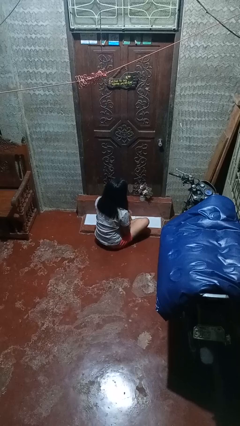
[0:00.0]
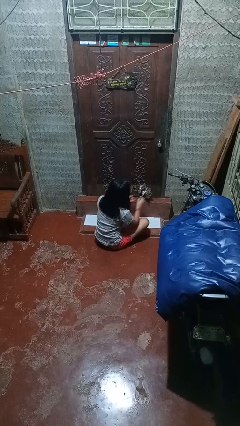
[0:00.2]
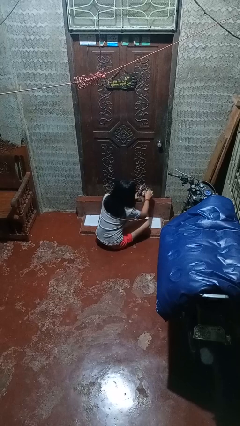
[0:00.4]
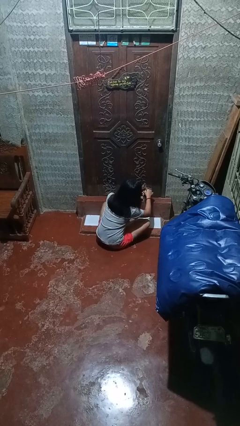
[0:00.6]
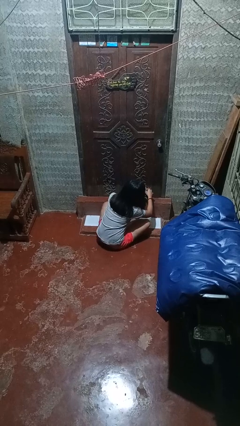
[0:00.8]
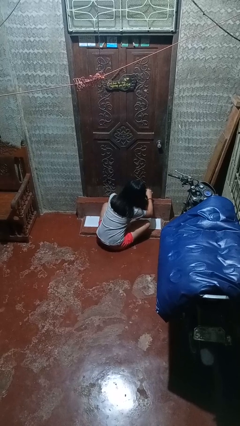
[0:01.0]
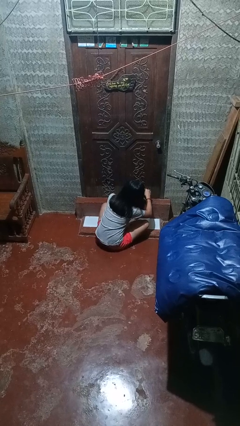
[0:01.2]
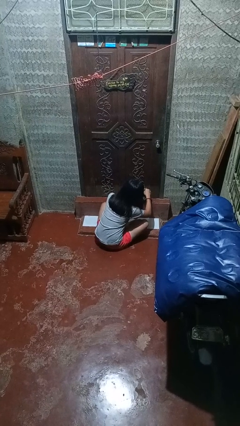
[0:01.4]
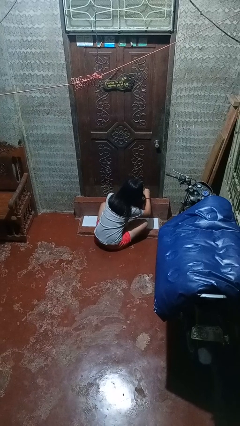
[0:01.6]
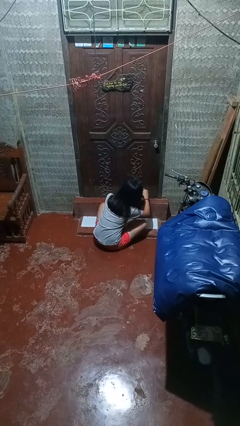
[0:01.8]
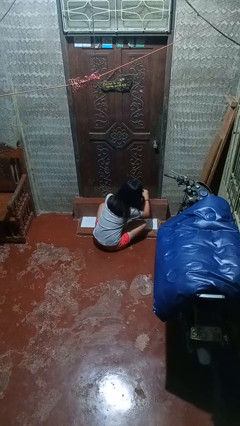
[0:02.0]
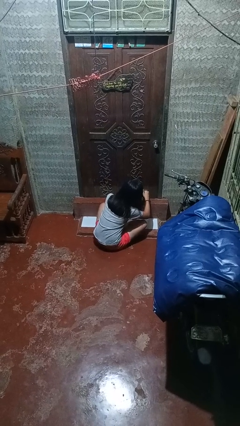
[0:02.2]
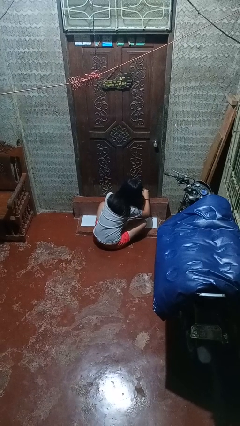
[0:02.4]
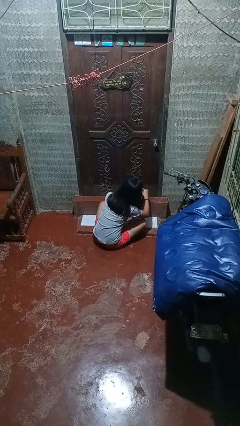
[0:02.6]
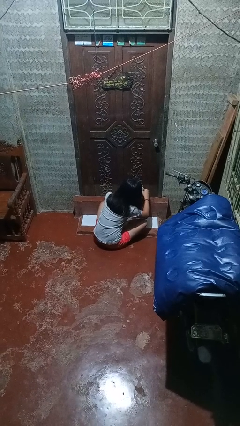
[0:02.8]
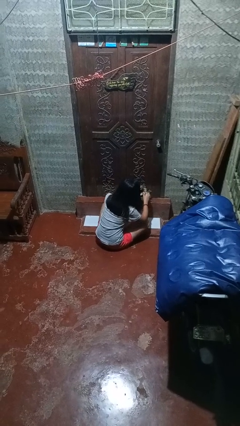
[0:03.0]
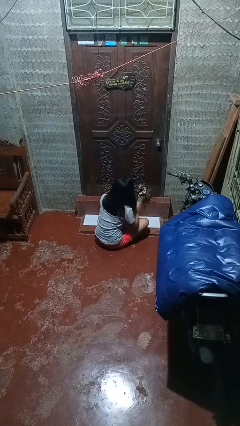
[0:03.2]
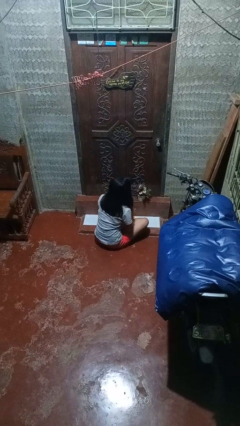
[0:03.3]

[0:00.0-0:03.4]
person arranges flowers in vase

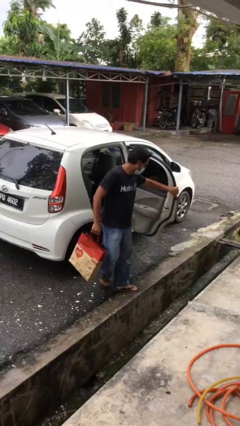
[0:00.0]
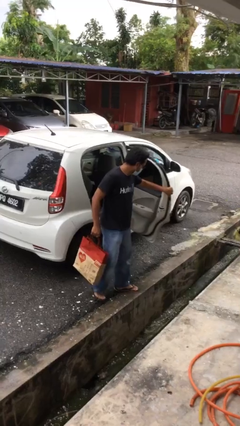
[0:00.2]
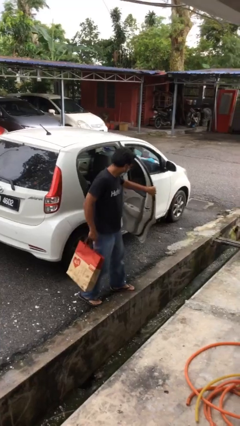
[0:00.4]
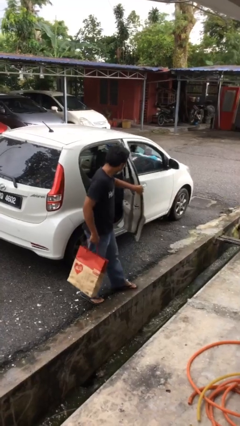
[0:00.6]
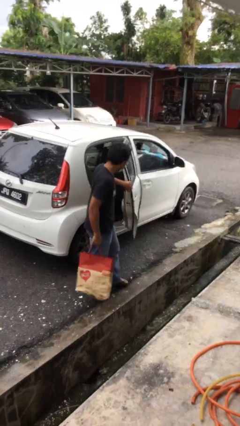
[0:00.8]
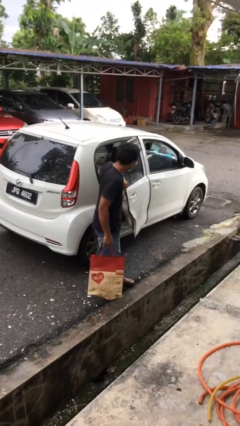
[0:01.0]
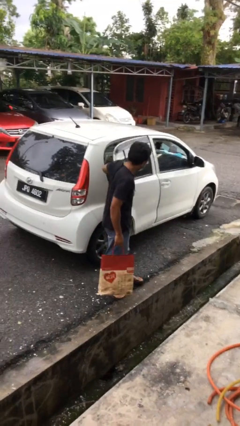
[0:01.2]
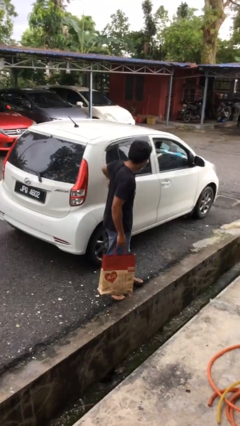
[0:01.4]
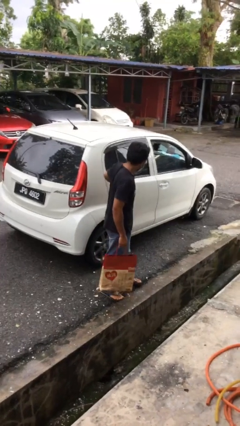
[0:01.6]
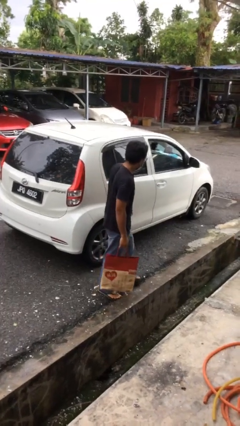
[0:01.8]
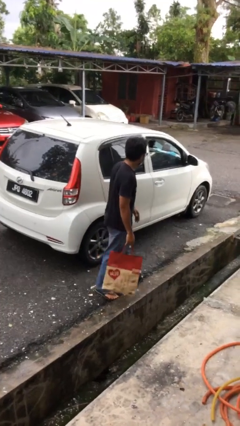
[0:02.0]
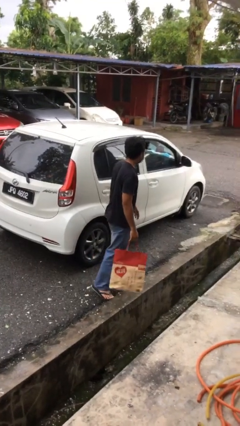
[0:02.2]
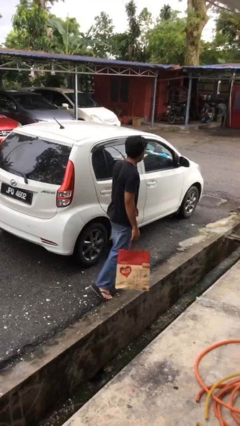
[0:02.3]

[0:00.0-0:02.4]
person closes car door

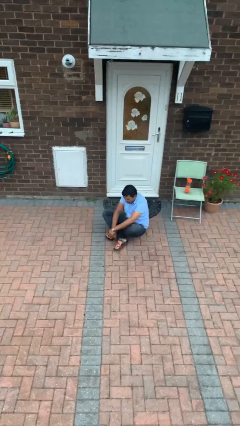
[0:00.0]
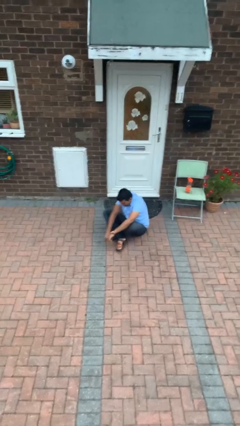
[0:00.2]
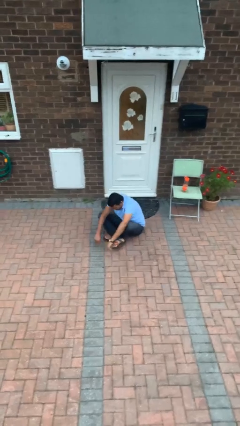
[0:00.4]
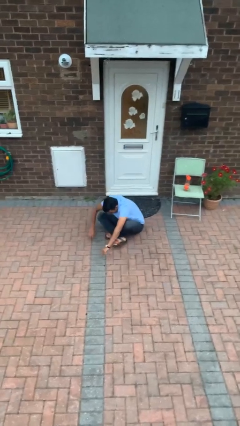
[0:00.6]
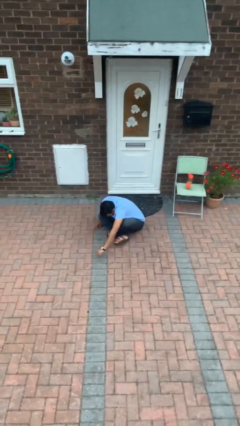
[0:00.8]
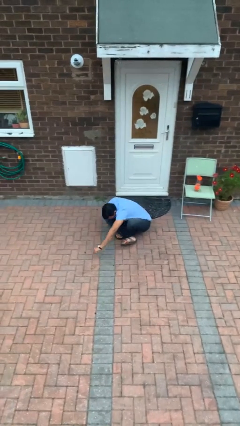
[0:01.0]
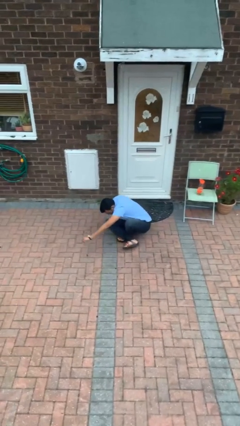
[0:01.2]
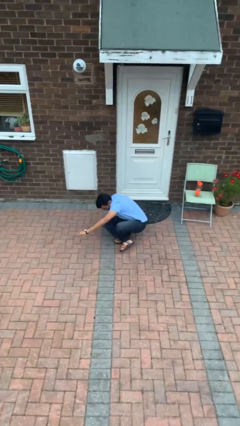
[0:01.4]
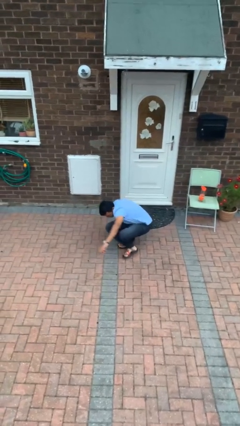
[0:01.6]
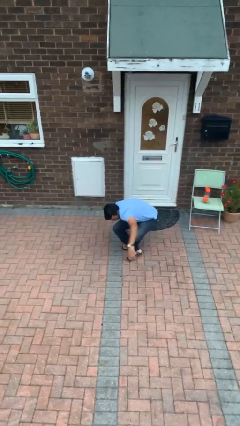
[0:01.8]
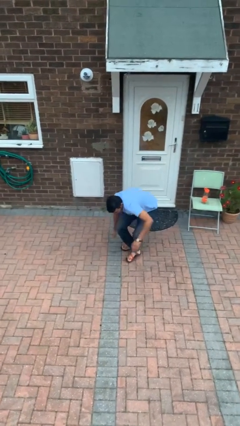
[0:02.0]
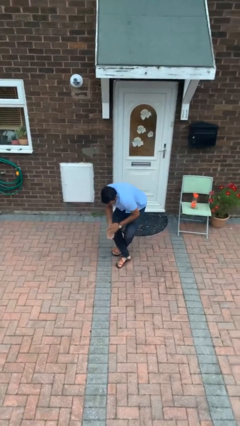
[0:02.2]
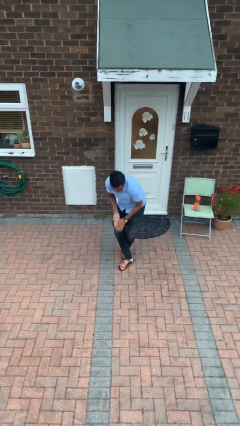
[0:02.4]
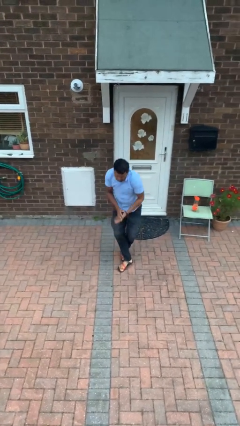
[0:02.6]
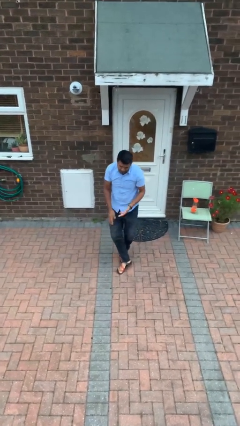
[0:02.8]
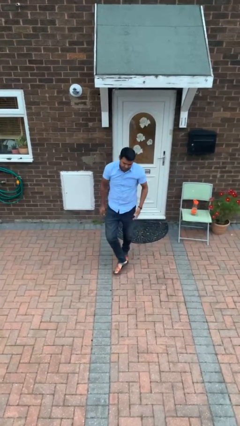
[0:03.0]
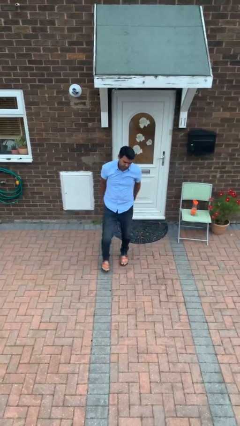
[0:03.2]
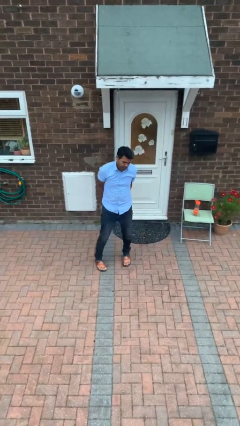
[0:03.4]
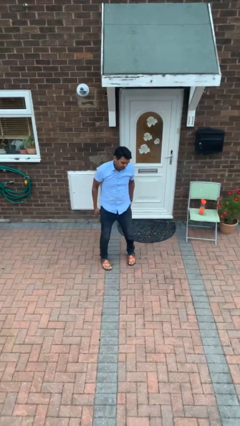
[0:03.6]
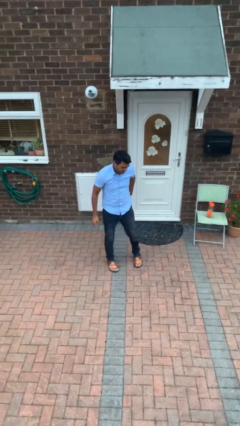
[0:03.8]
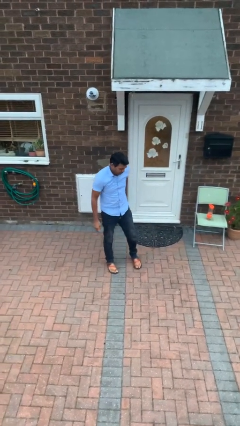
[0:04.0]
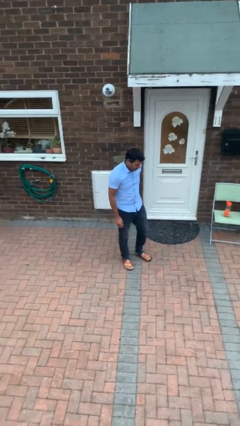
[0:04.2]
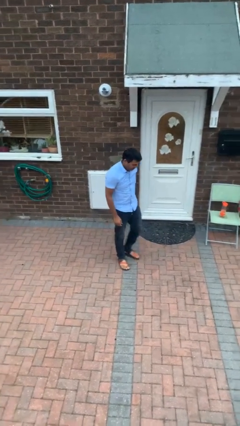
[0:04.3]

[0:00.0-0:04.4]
person stands up from floor

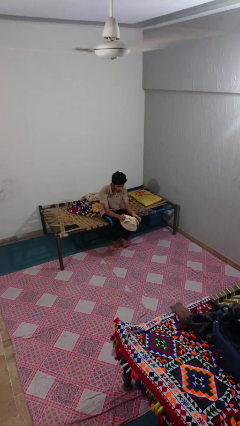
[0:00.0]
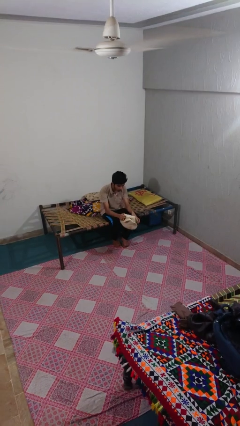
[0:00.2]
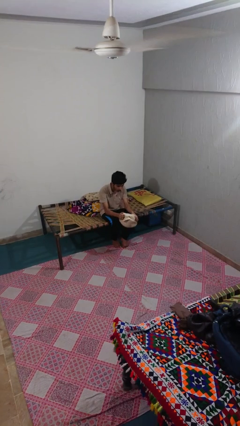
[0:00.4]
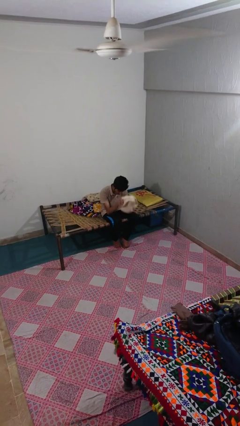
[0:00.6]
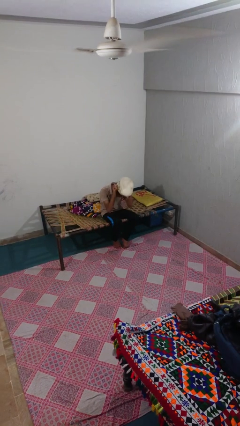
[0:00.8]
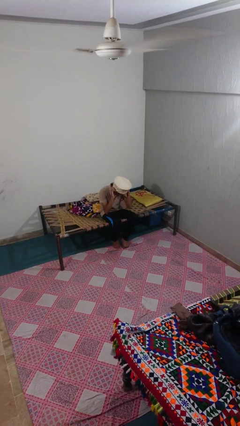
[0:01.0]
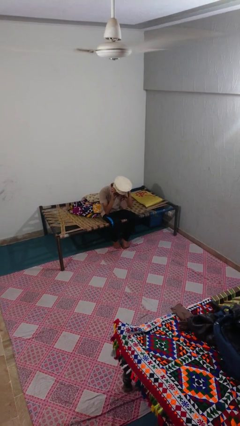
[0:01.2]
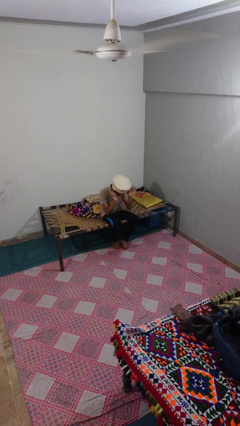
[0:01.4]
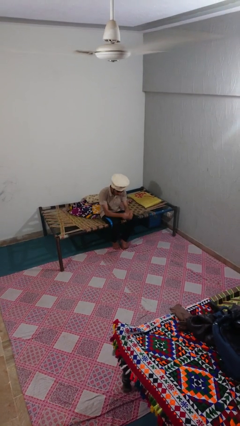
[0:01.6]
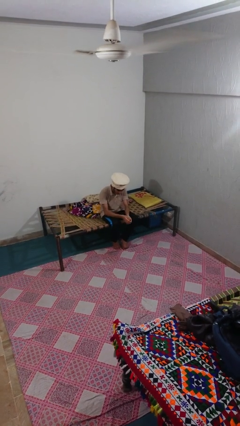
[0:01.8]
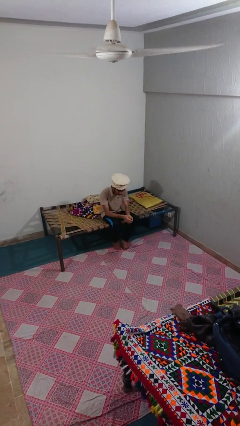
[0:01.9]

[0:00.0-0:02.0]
person puts on hat

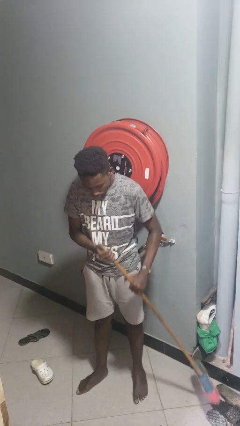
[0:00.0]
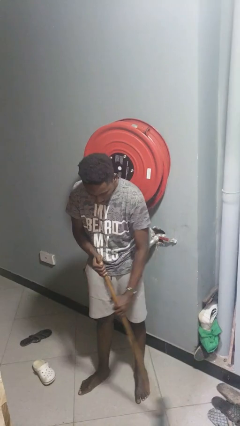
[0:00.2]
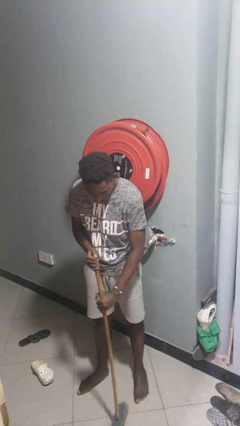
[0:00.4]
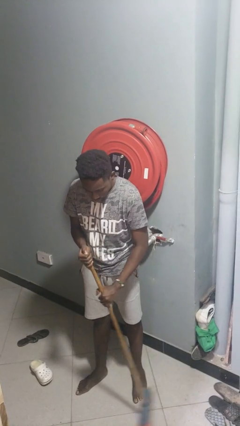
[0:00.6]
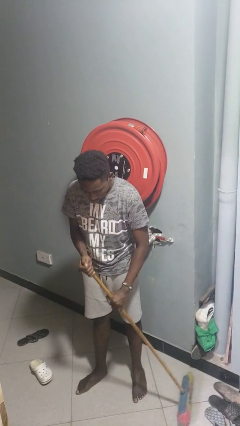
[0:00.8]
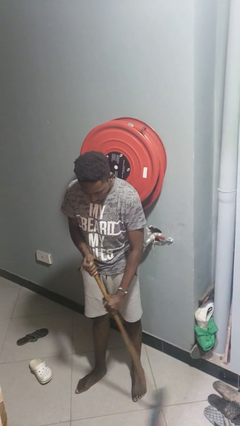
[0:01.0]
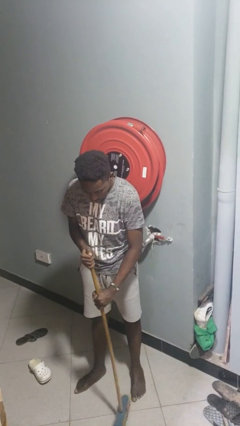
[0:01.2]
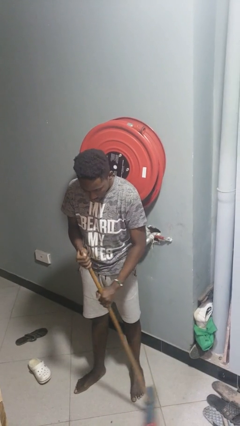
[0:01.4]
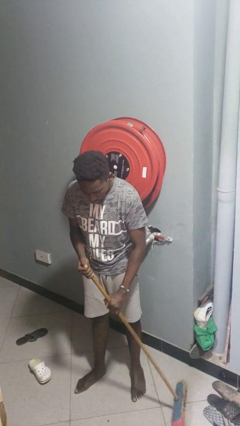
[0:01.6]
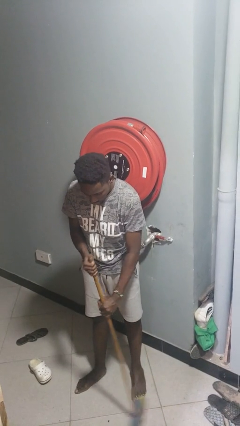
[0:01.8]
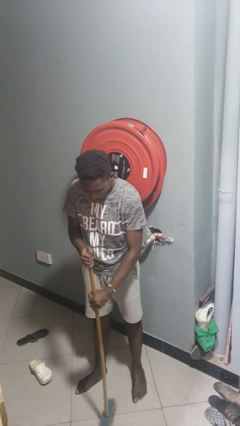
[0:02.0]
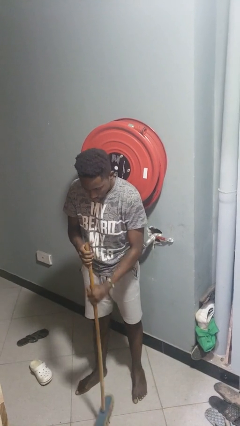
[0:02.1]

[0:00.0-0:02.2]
person sweeps floor

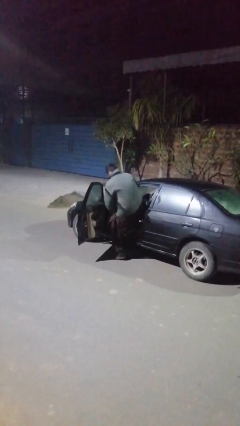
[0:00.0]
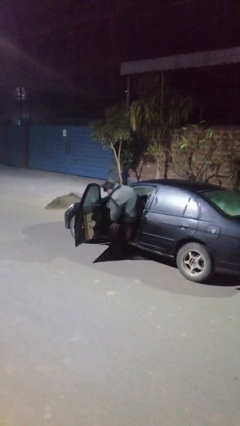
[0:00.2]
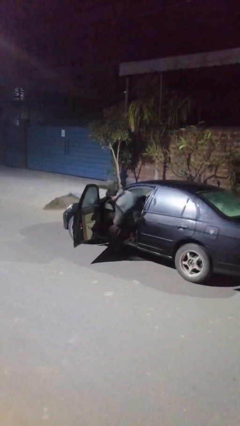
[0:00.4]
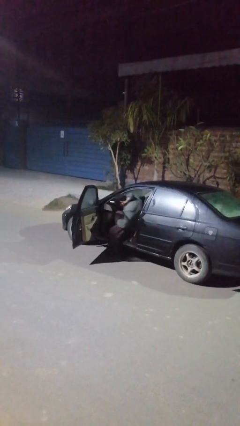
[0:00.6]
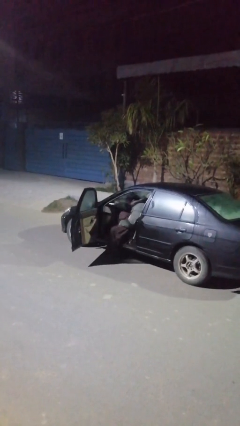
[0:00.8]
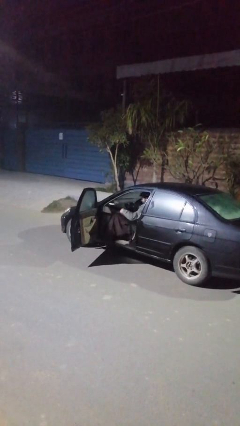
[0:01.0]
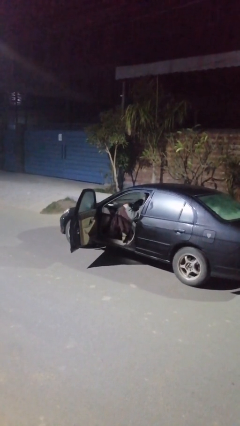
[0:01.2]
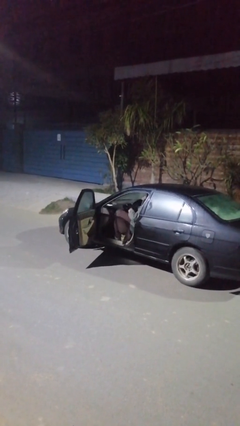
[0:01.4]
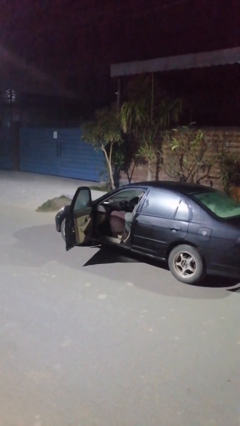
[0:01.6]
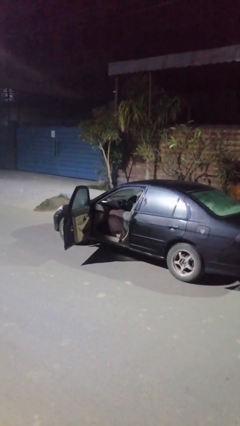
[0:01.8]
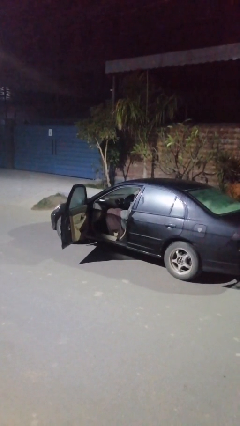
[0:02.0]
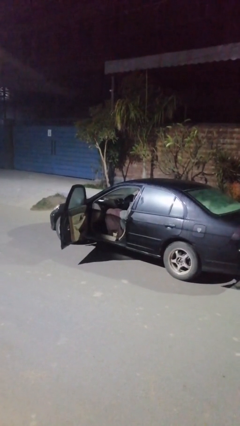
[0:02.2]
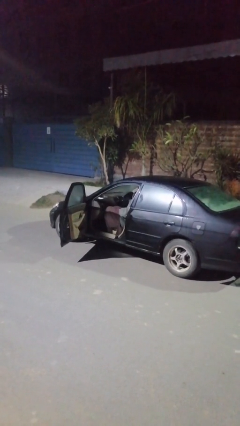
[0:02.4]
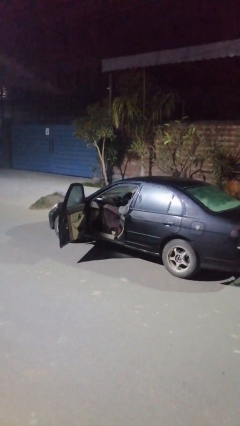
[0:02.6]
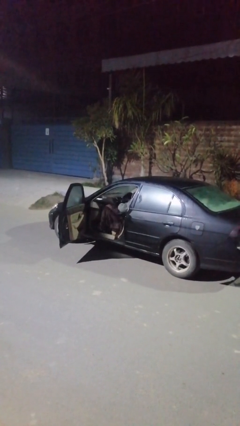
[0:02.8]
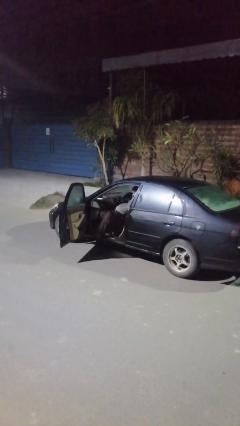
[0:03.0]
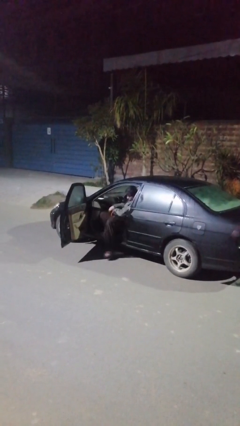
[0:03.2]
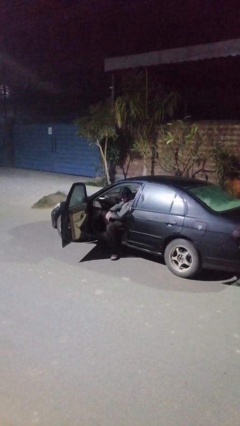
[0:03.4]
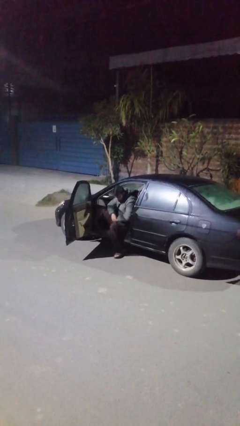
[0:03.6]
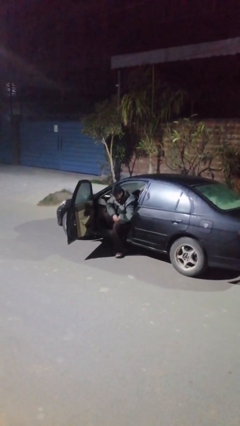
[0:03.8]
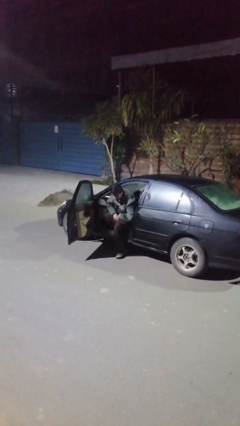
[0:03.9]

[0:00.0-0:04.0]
person enters car
